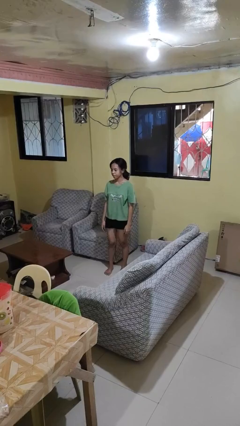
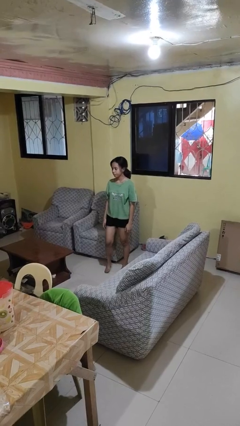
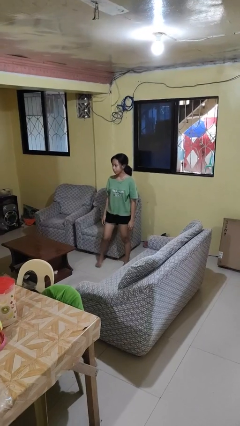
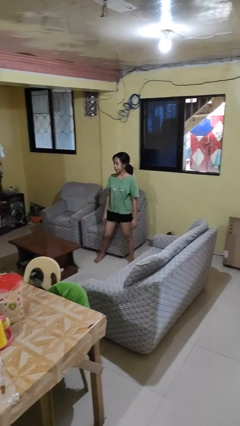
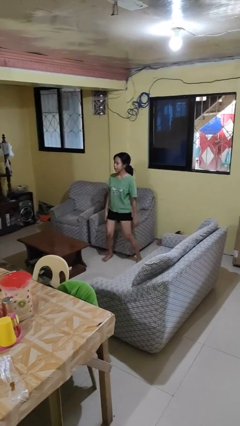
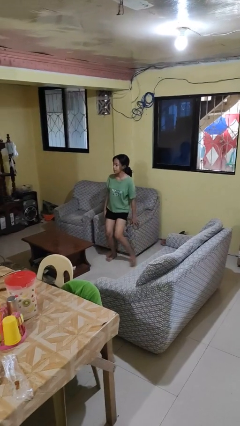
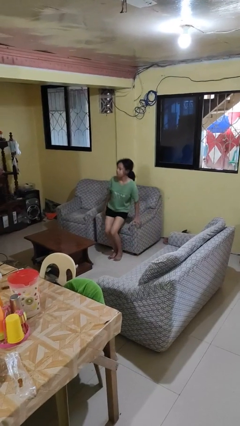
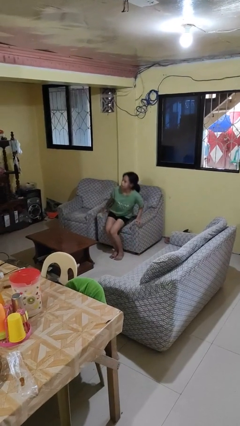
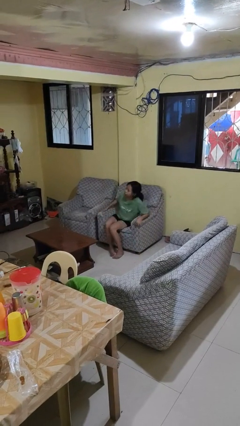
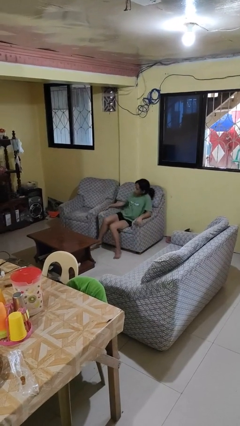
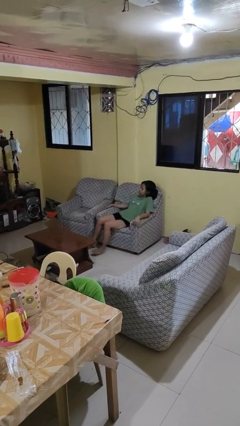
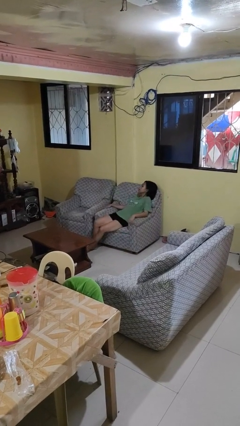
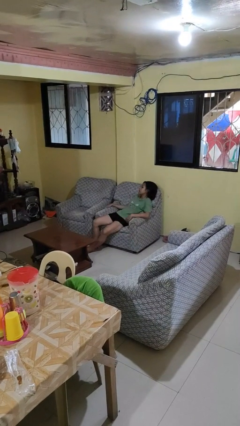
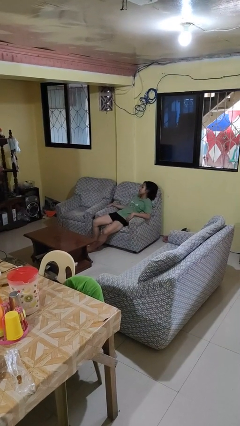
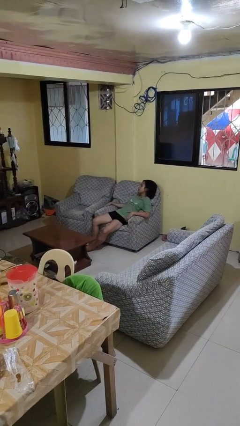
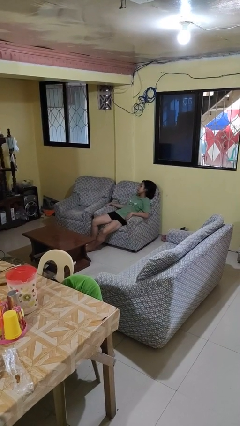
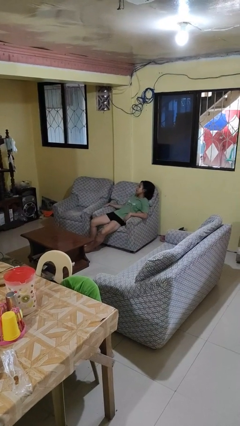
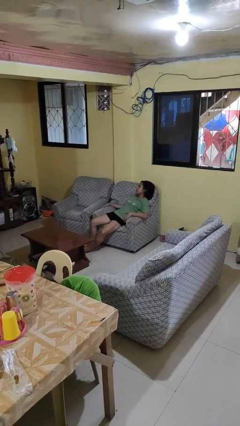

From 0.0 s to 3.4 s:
person lies down on couch

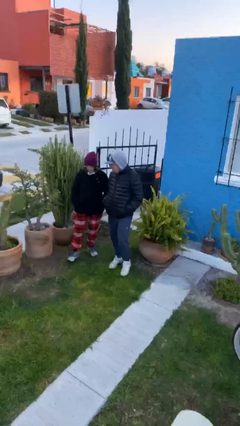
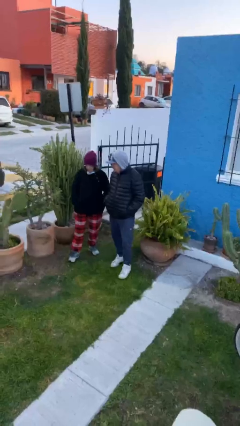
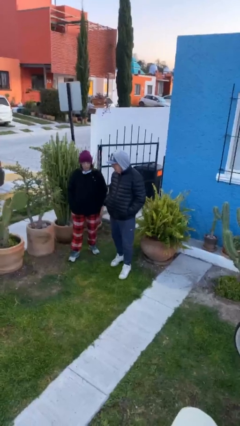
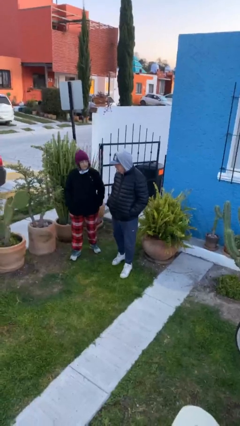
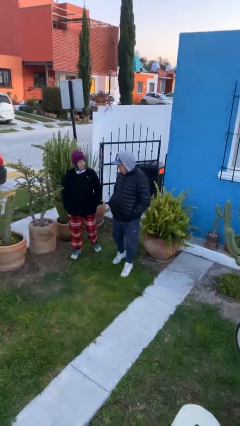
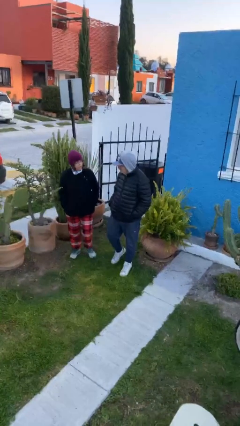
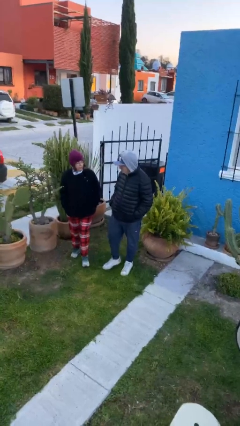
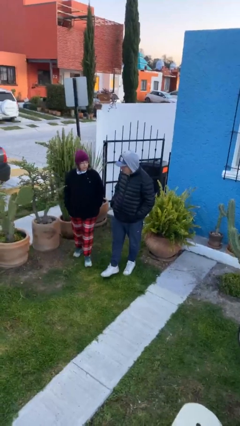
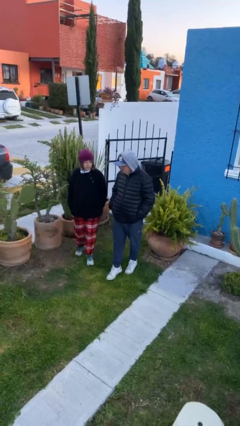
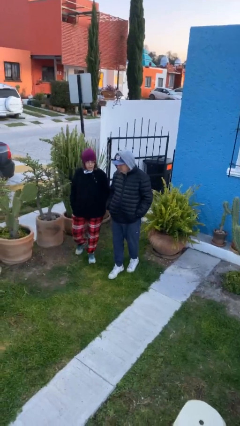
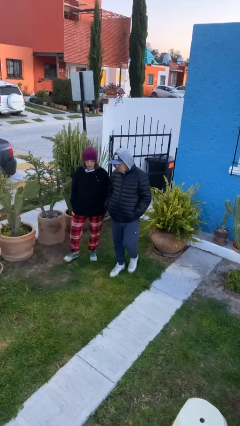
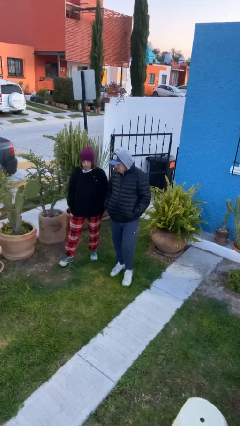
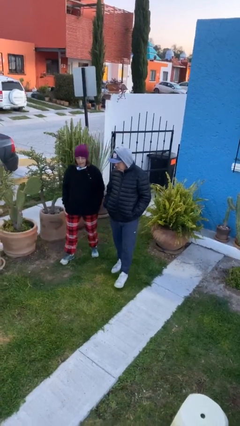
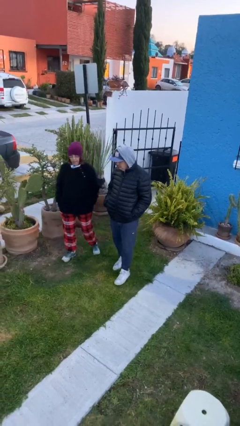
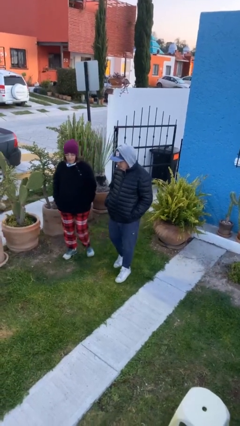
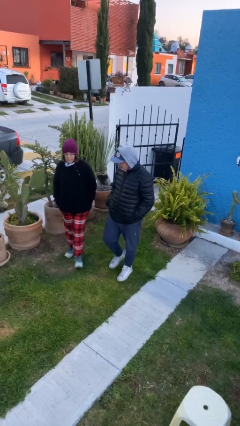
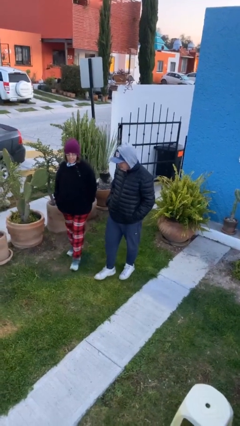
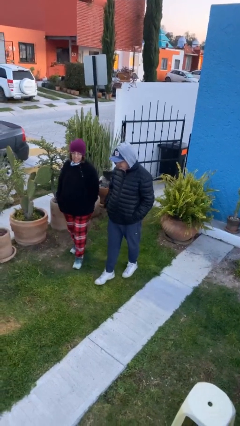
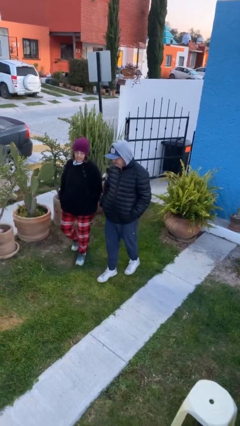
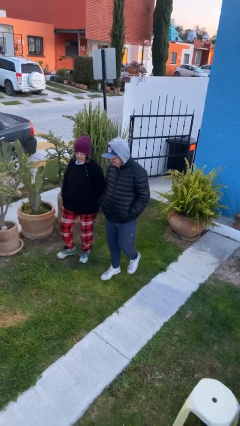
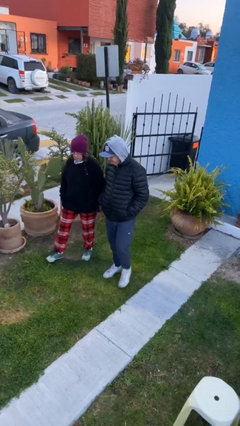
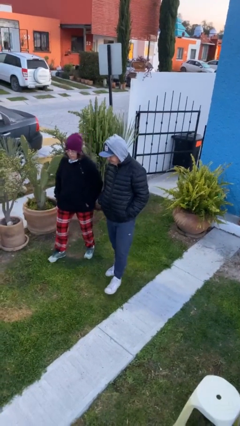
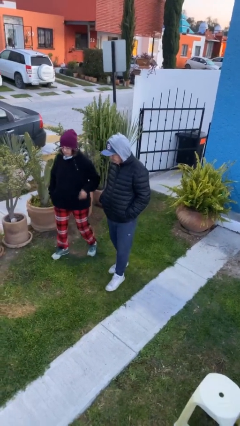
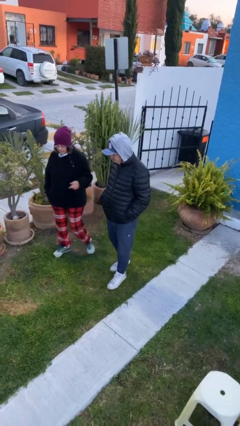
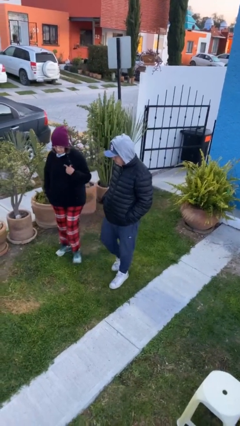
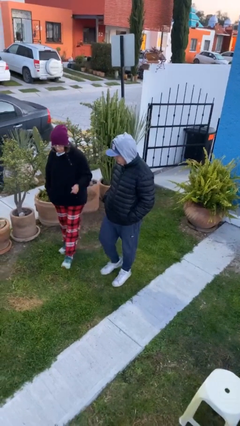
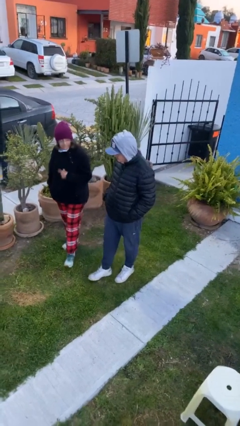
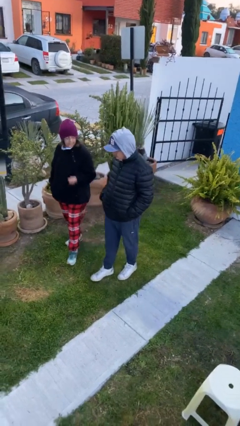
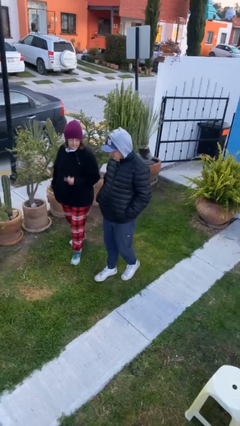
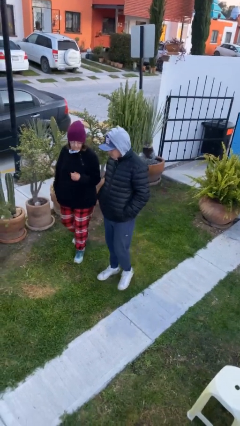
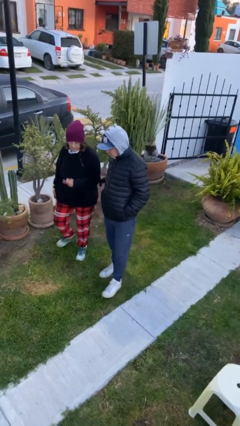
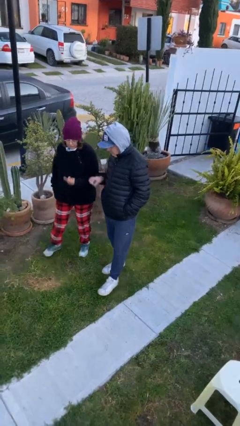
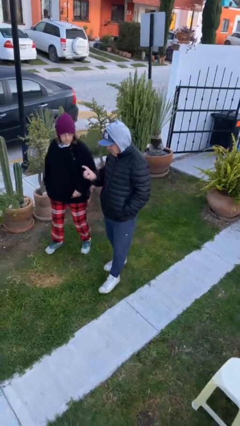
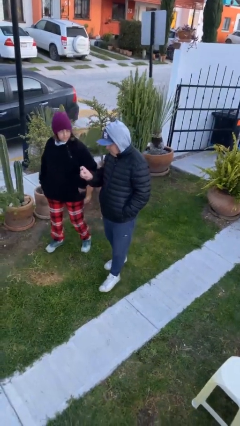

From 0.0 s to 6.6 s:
person talks to person

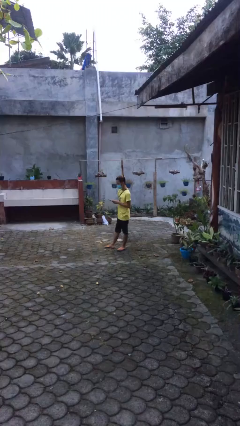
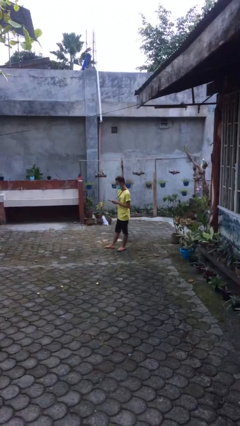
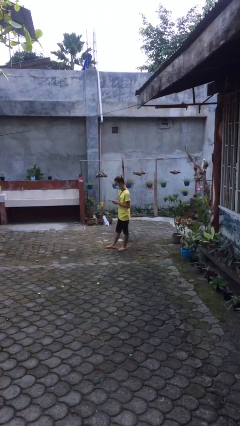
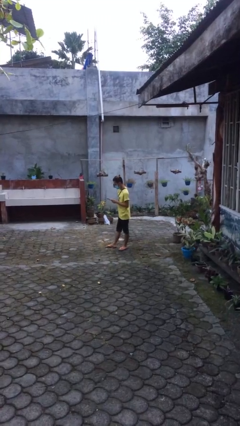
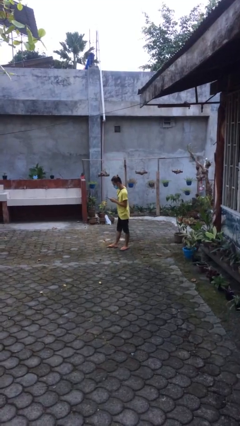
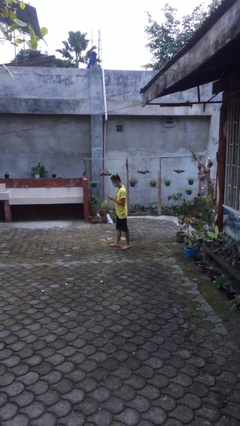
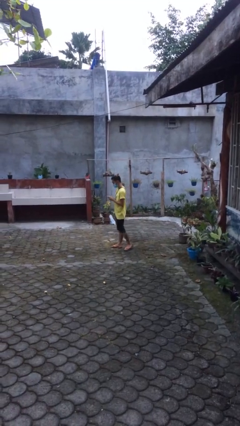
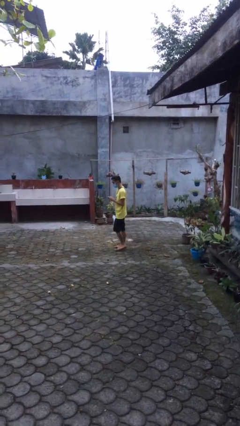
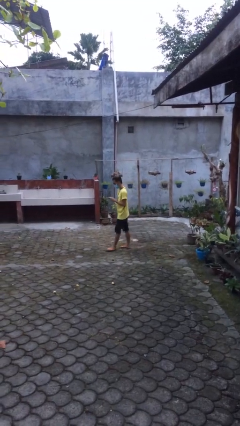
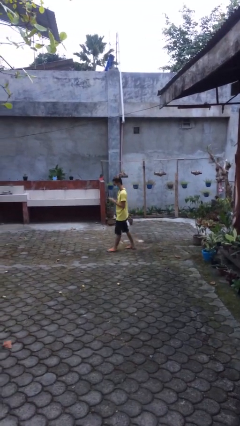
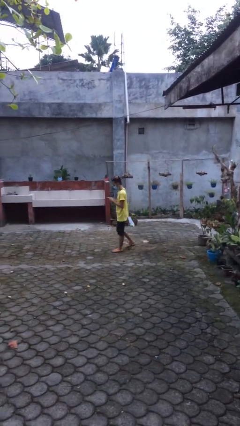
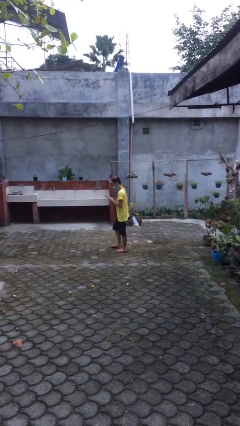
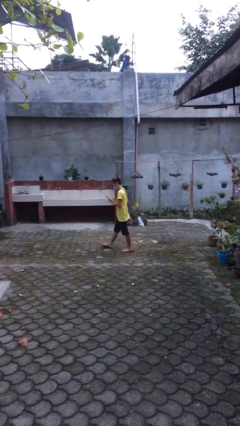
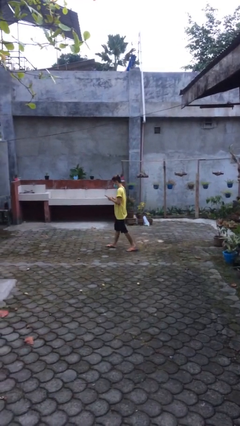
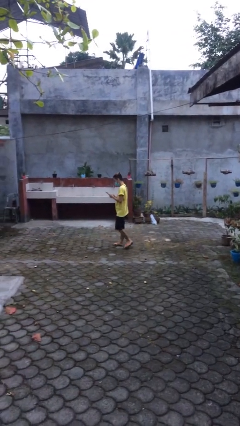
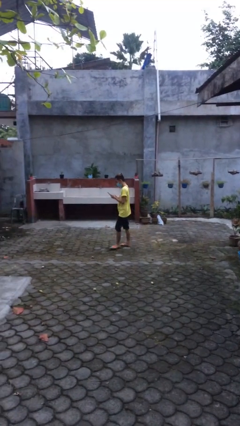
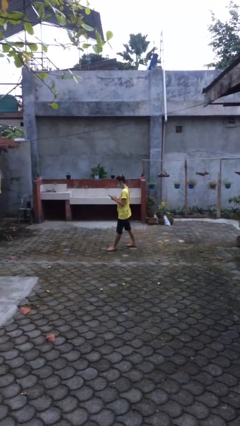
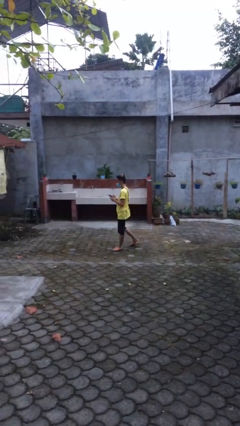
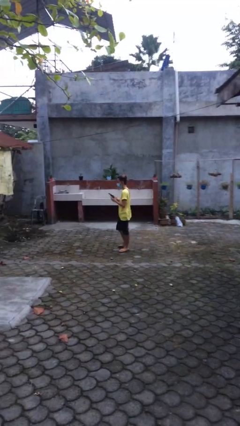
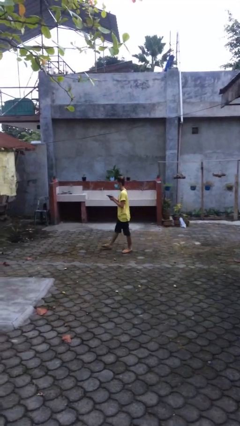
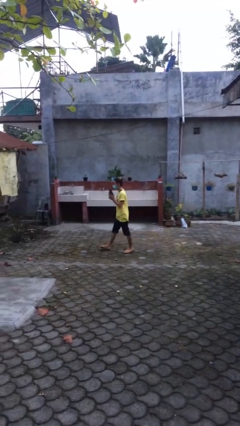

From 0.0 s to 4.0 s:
person texts on phone

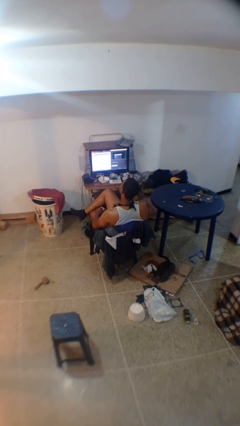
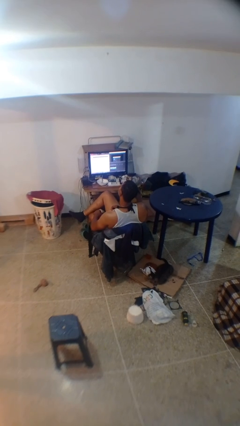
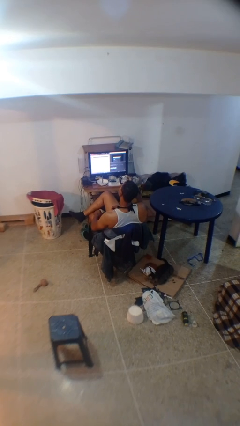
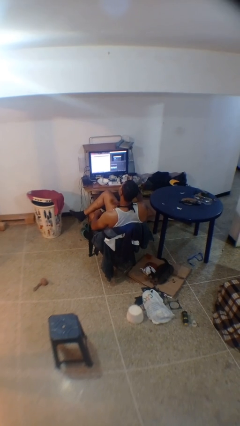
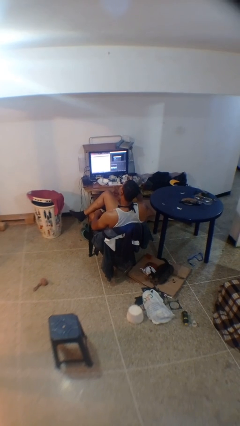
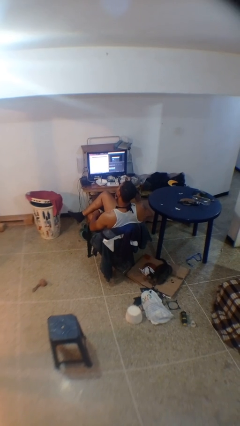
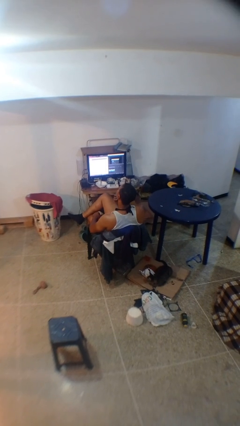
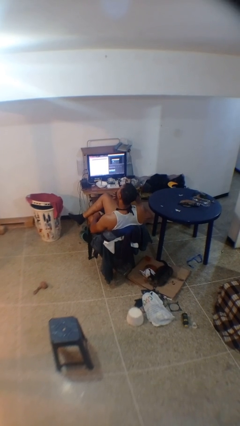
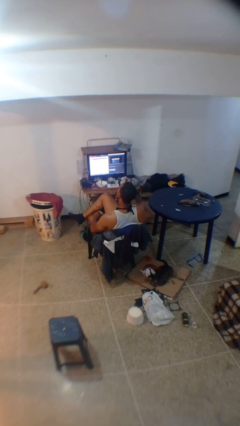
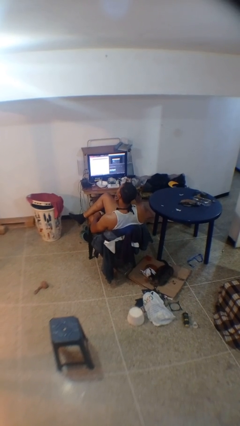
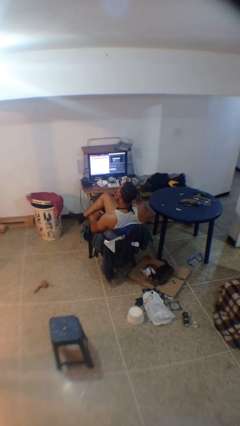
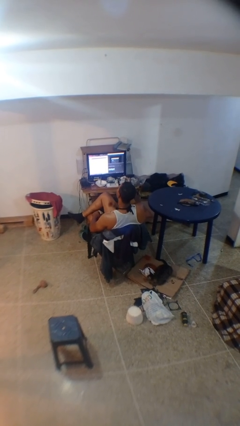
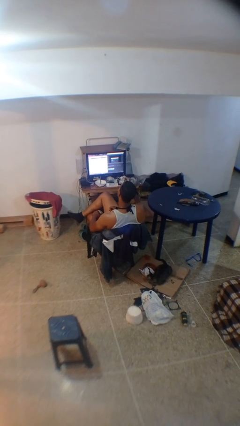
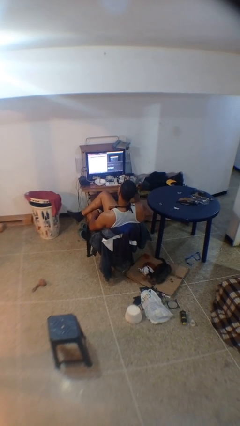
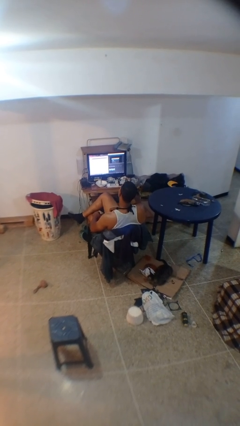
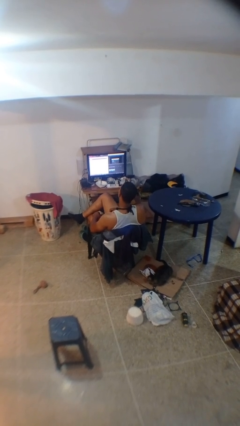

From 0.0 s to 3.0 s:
person strokes chin

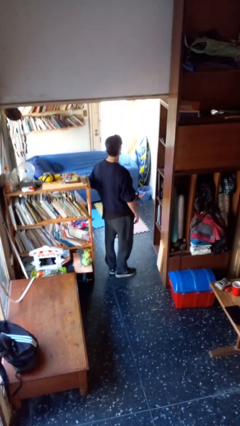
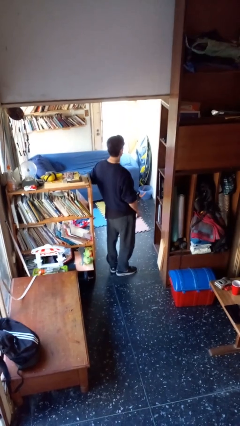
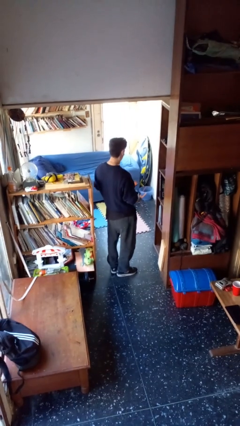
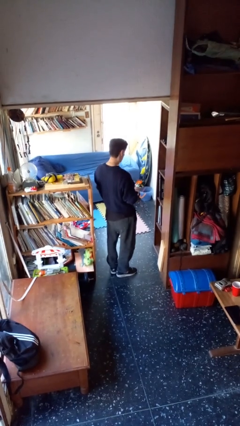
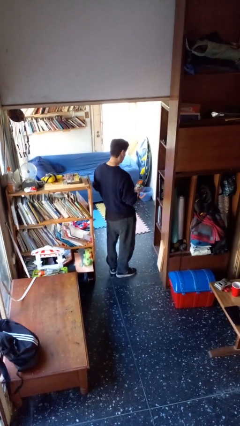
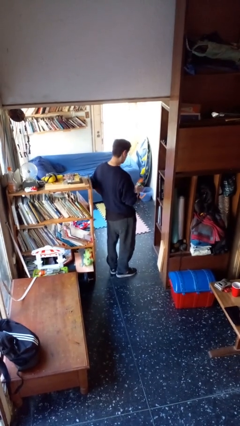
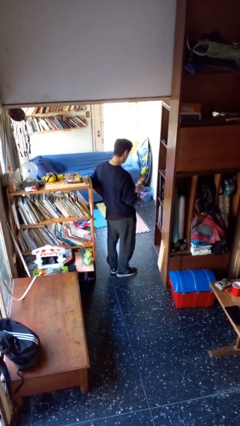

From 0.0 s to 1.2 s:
person takes phone from pocket
